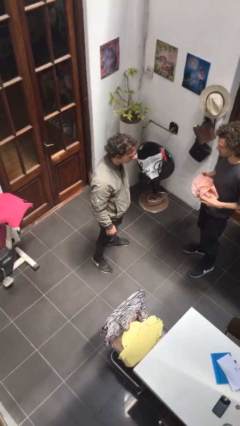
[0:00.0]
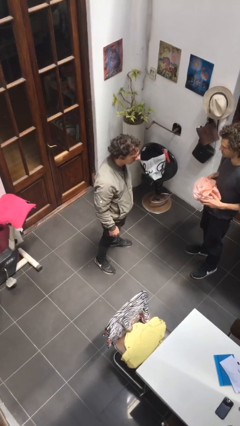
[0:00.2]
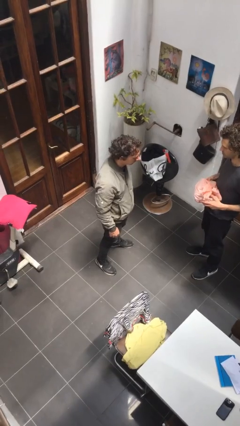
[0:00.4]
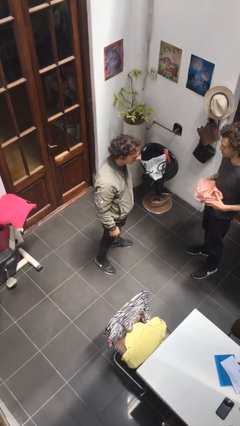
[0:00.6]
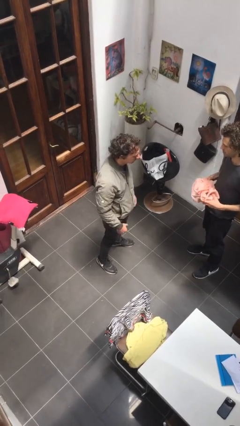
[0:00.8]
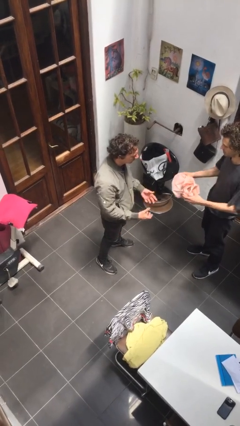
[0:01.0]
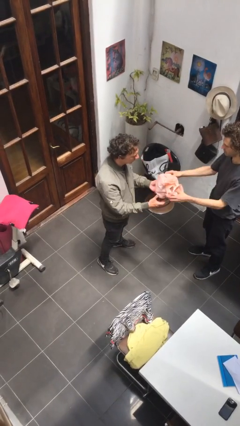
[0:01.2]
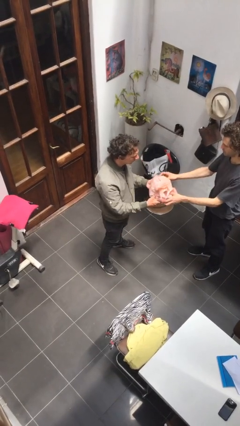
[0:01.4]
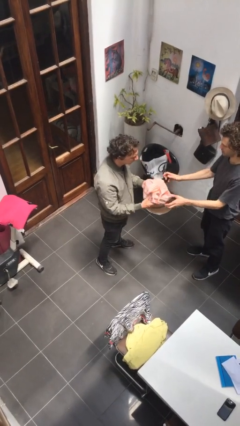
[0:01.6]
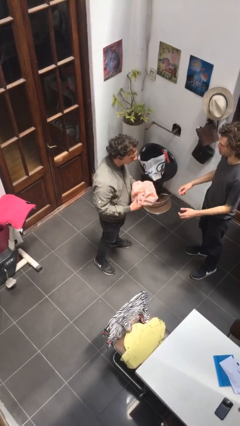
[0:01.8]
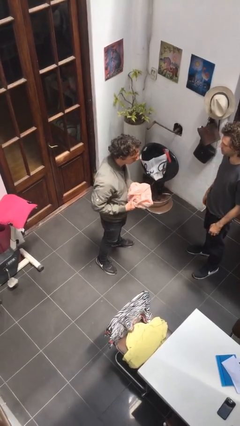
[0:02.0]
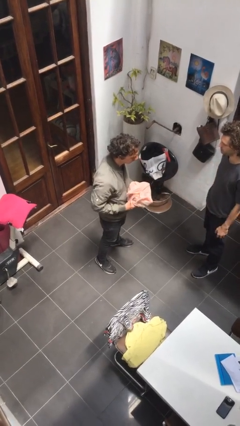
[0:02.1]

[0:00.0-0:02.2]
person transfers object to person

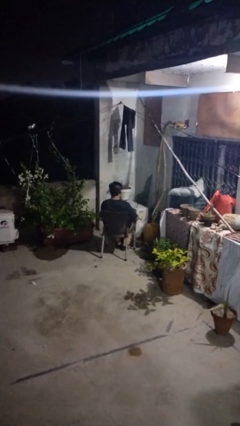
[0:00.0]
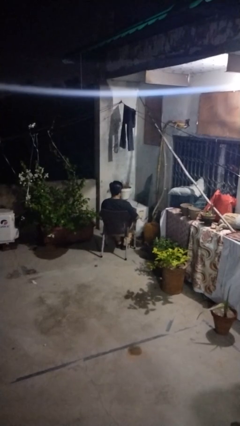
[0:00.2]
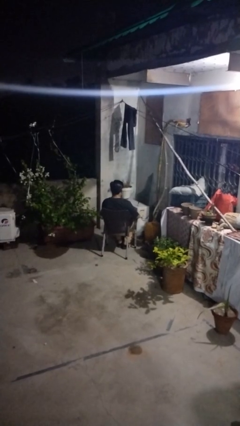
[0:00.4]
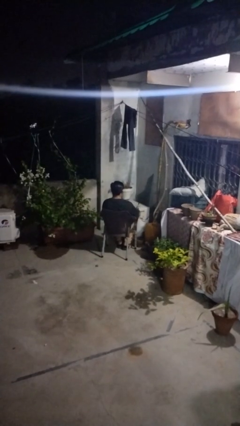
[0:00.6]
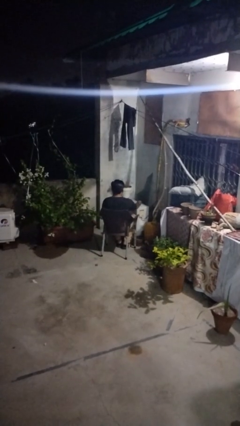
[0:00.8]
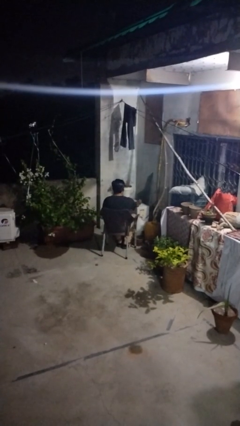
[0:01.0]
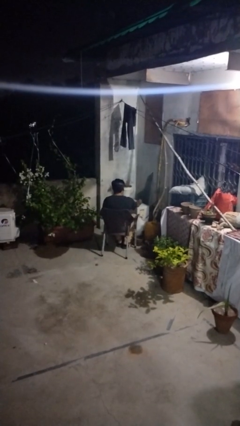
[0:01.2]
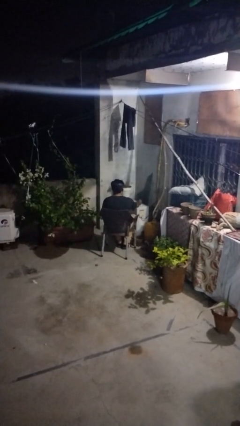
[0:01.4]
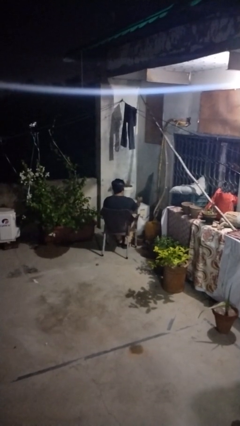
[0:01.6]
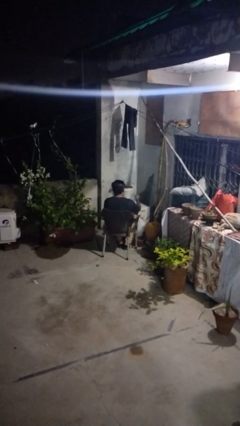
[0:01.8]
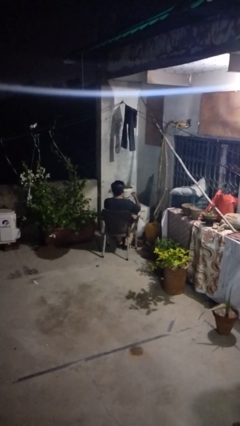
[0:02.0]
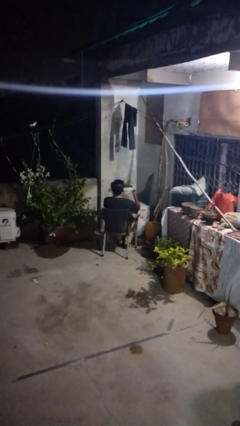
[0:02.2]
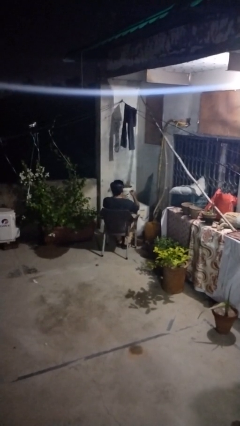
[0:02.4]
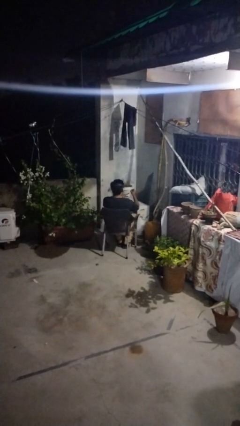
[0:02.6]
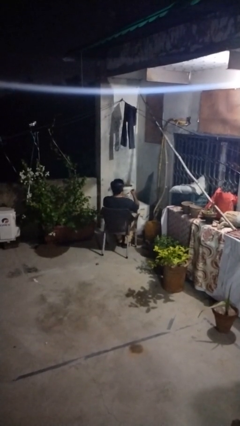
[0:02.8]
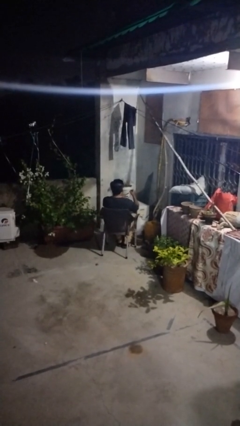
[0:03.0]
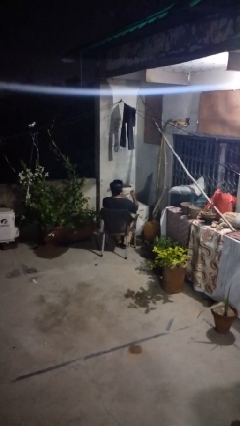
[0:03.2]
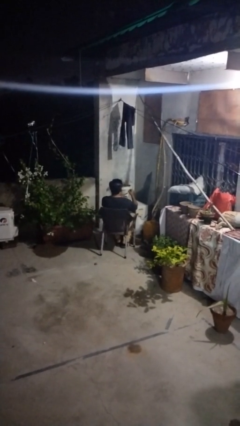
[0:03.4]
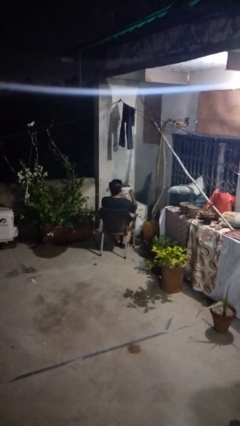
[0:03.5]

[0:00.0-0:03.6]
person paints fingernails

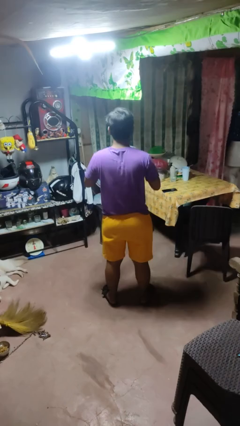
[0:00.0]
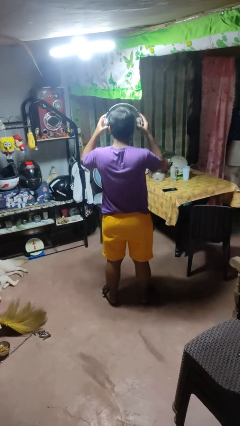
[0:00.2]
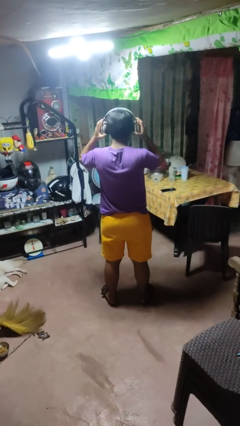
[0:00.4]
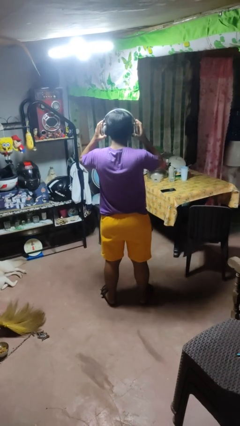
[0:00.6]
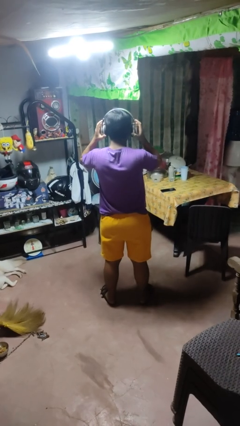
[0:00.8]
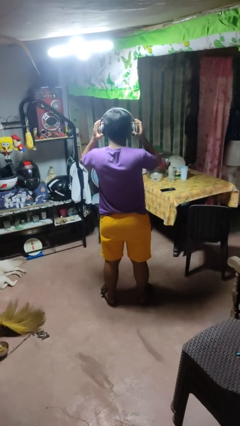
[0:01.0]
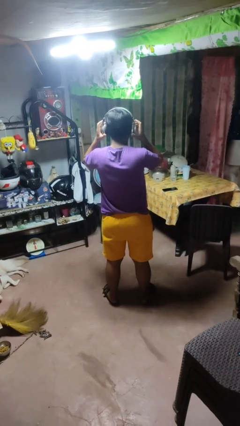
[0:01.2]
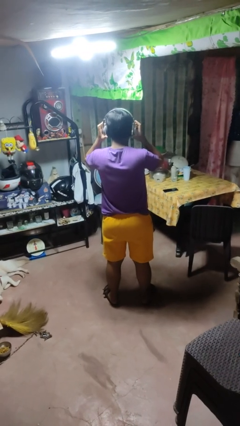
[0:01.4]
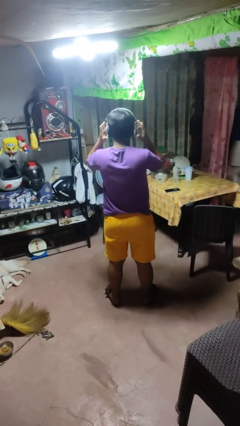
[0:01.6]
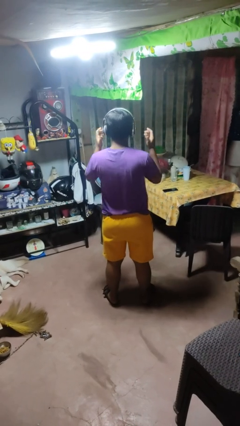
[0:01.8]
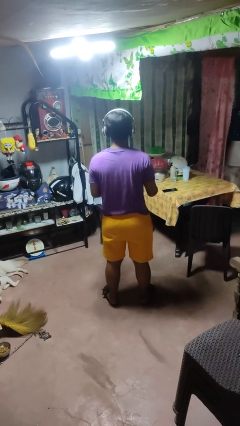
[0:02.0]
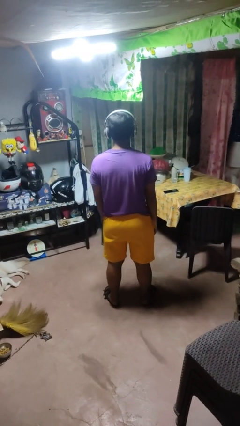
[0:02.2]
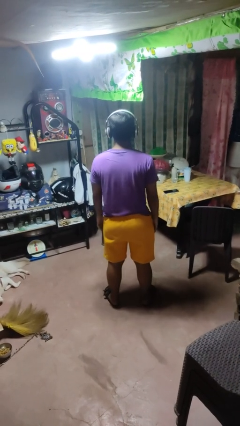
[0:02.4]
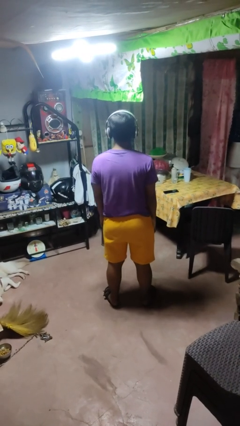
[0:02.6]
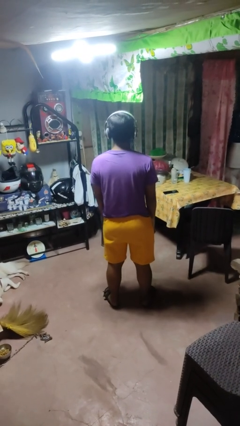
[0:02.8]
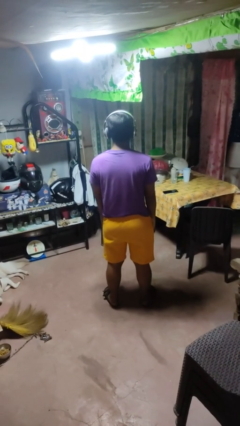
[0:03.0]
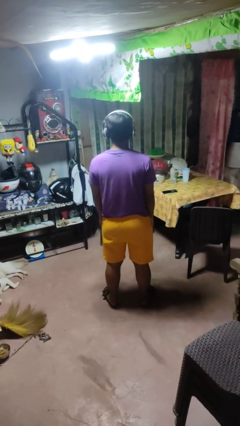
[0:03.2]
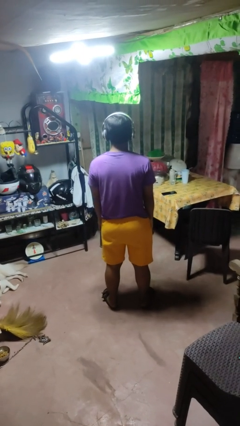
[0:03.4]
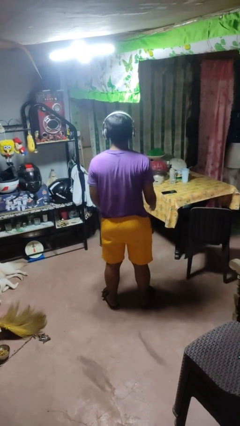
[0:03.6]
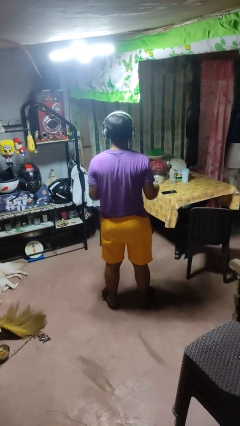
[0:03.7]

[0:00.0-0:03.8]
person puts on headphones

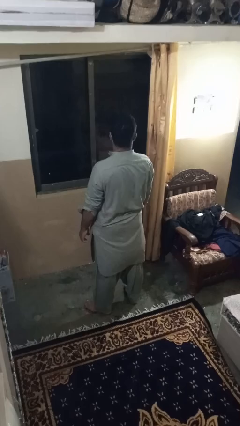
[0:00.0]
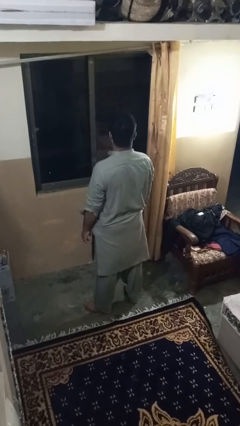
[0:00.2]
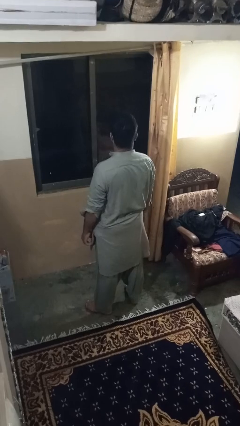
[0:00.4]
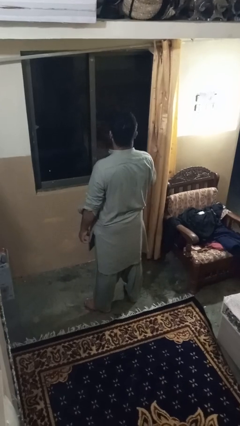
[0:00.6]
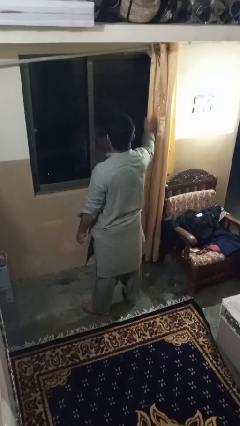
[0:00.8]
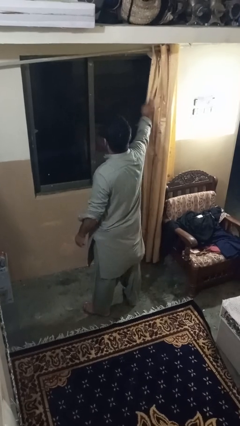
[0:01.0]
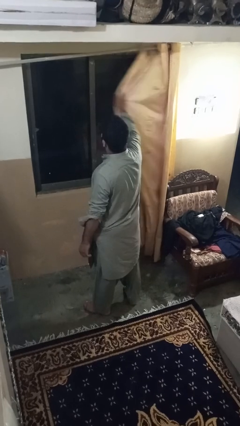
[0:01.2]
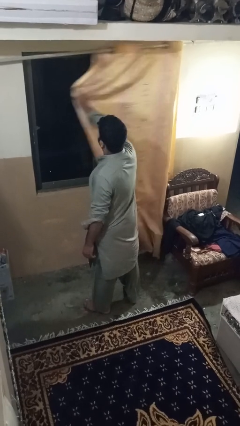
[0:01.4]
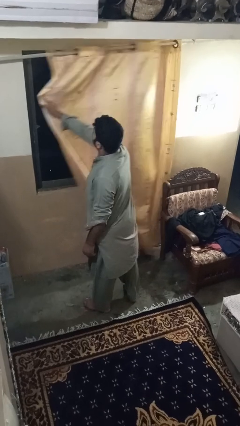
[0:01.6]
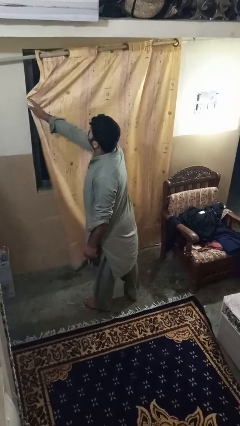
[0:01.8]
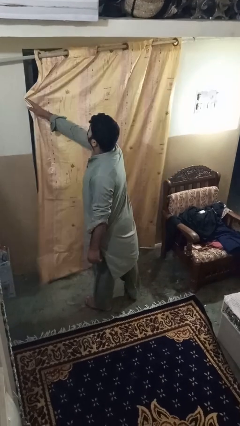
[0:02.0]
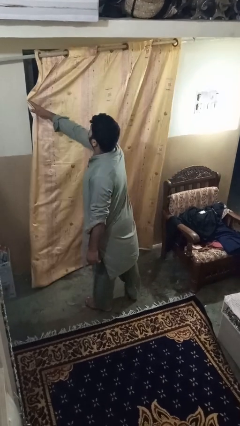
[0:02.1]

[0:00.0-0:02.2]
person closes curtains

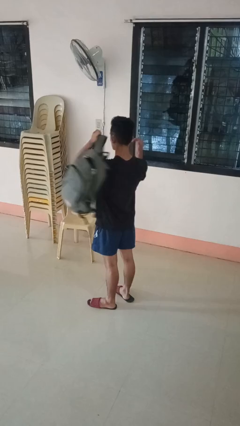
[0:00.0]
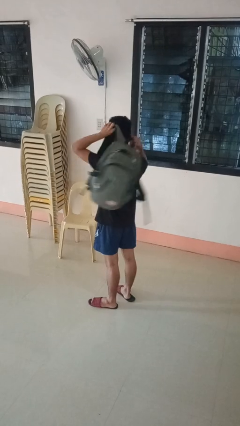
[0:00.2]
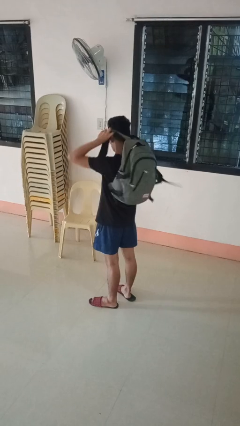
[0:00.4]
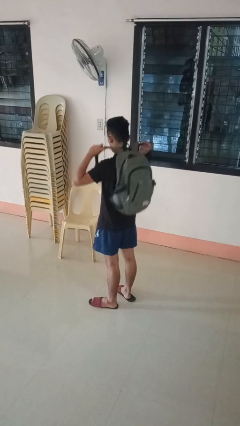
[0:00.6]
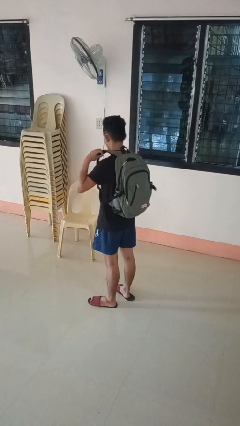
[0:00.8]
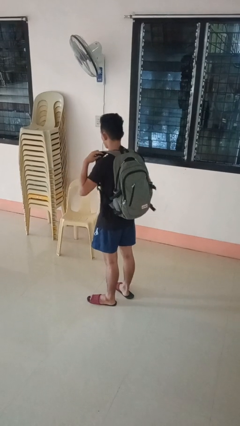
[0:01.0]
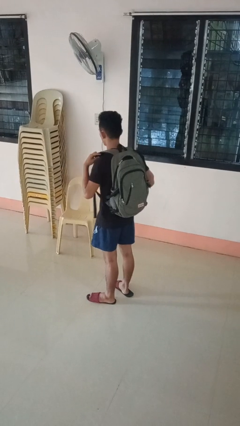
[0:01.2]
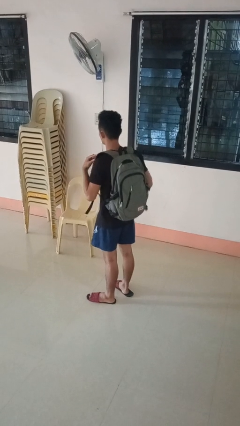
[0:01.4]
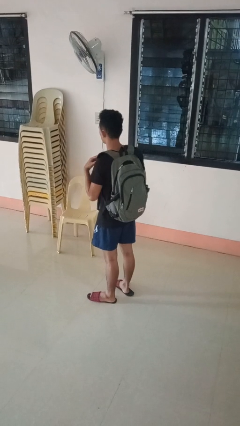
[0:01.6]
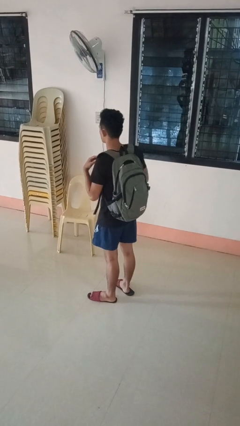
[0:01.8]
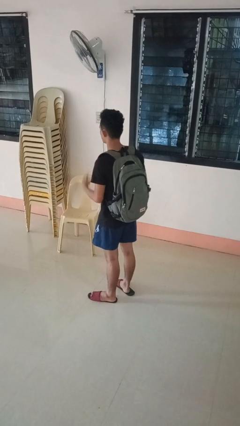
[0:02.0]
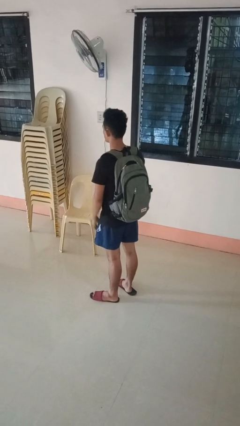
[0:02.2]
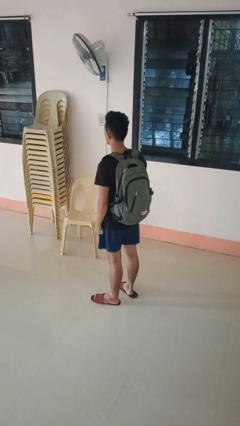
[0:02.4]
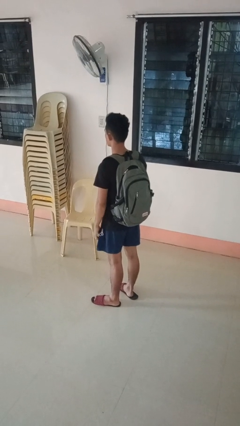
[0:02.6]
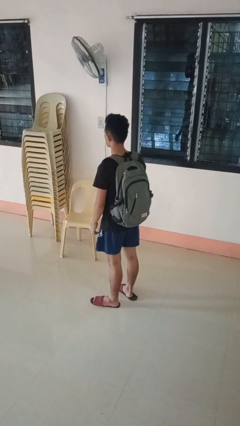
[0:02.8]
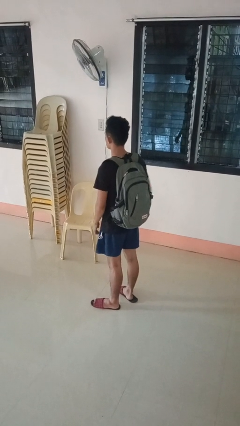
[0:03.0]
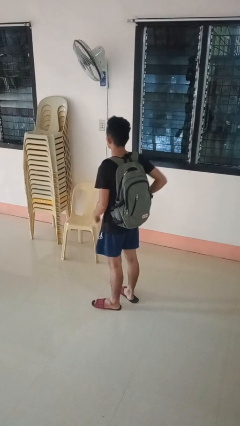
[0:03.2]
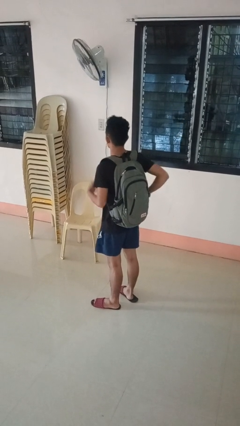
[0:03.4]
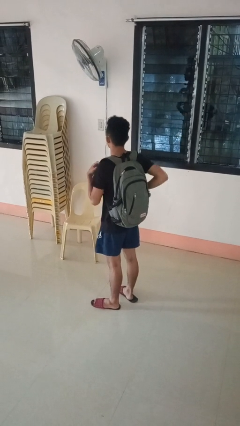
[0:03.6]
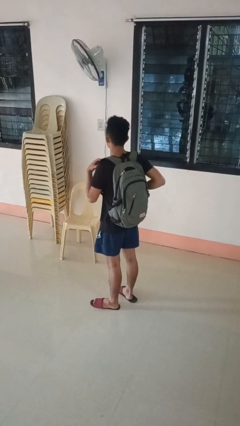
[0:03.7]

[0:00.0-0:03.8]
person puts on backpack

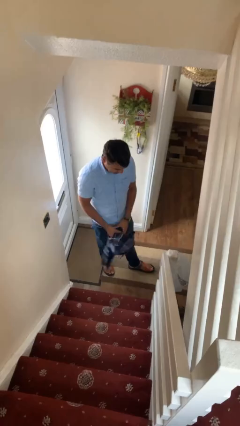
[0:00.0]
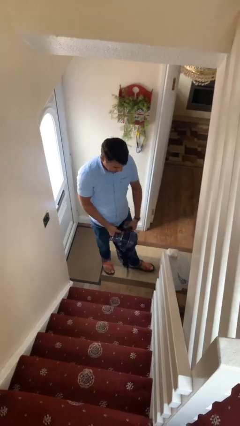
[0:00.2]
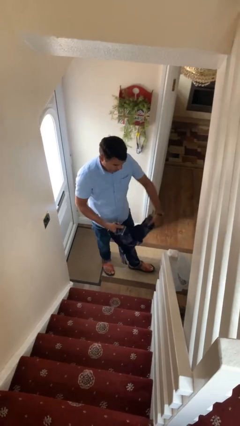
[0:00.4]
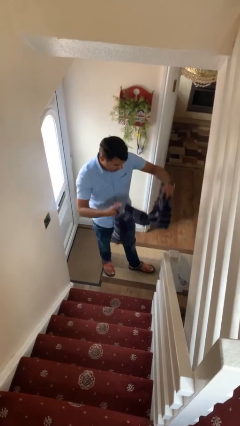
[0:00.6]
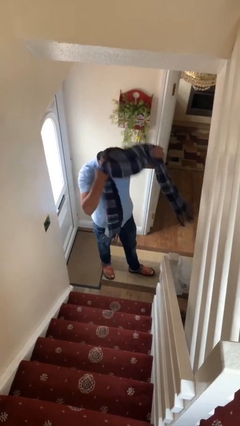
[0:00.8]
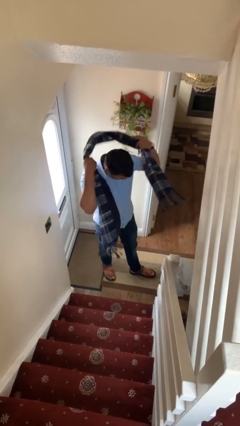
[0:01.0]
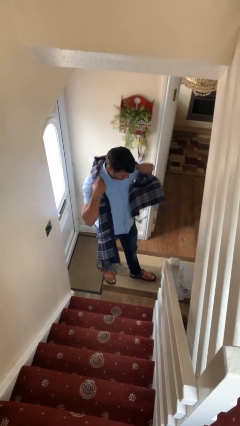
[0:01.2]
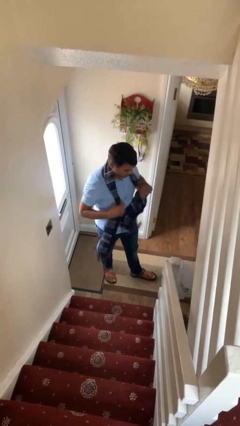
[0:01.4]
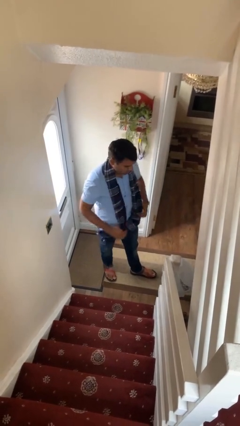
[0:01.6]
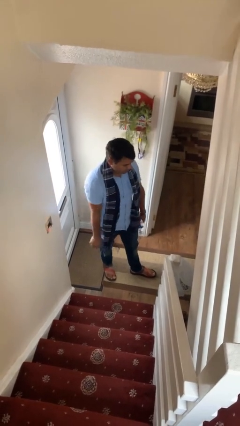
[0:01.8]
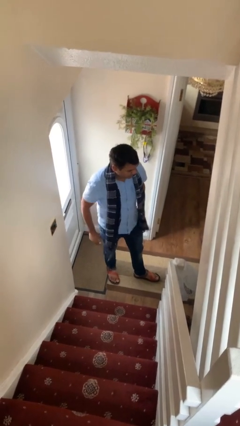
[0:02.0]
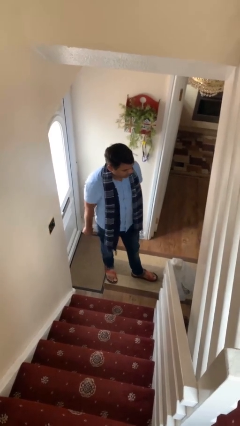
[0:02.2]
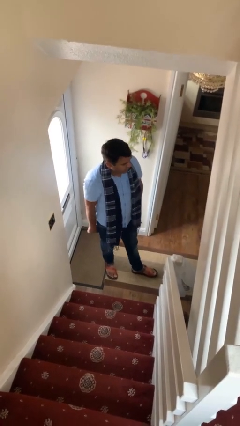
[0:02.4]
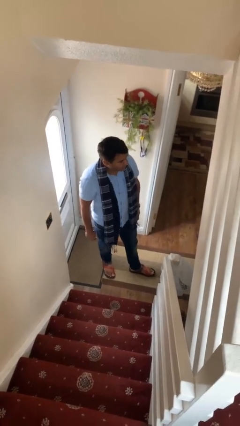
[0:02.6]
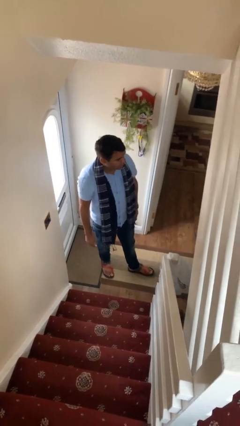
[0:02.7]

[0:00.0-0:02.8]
person puts on scarf
